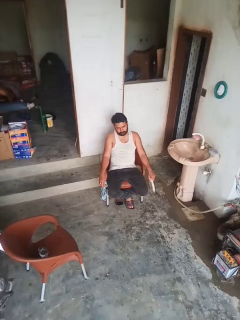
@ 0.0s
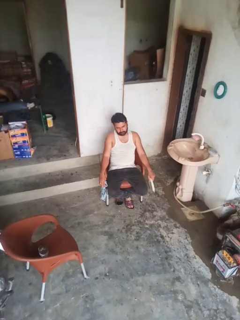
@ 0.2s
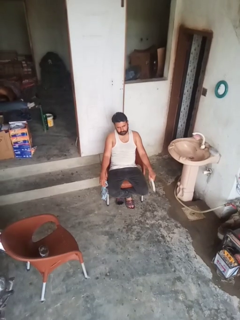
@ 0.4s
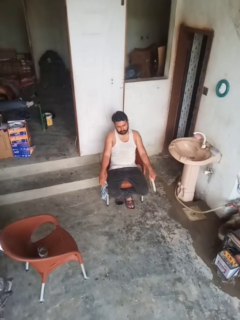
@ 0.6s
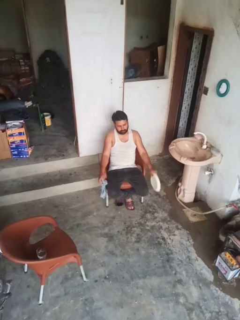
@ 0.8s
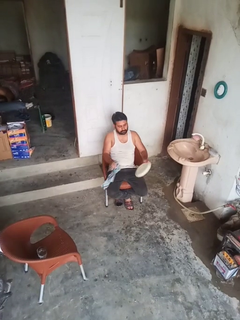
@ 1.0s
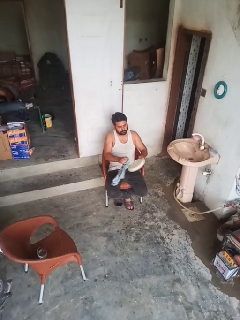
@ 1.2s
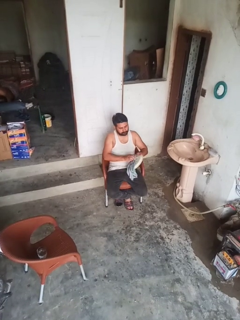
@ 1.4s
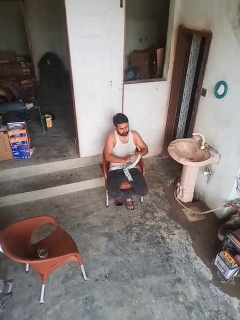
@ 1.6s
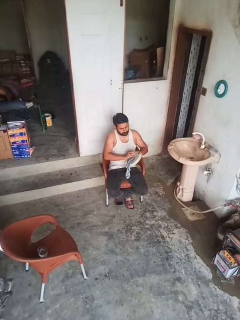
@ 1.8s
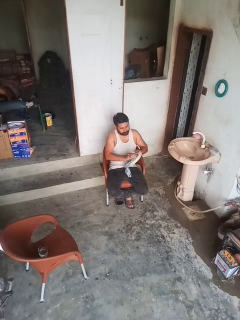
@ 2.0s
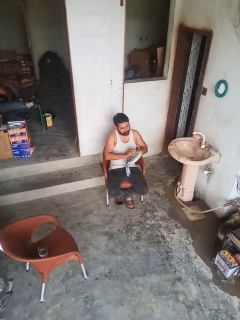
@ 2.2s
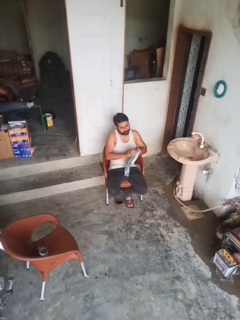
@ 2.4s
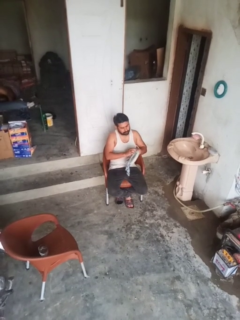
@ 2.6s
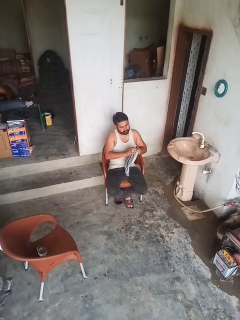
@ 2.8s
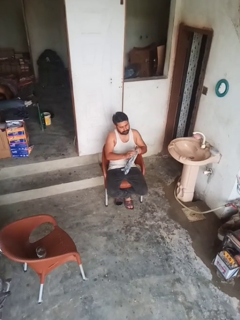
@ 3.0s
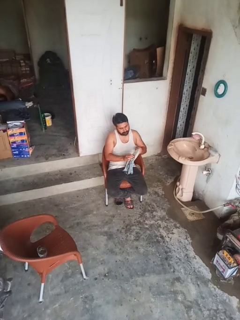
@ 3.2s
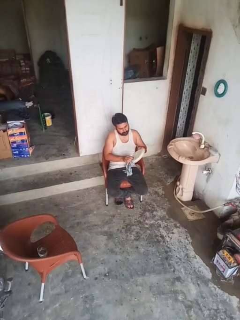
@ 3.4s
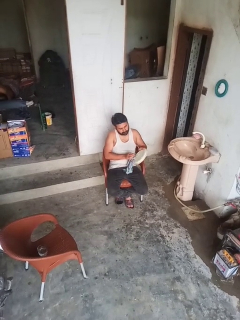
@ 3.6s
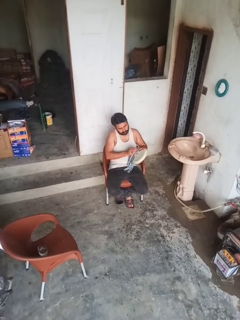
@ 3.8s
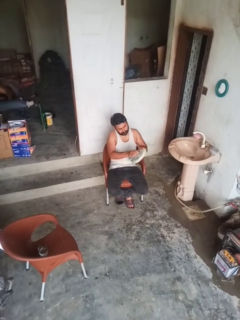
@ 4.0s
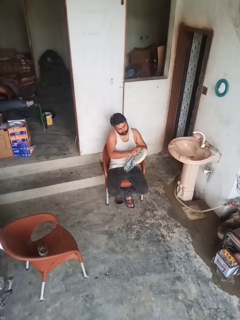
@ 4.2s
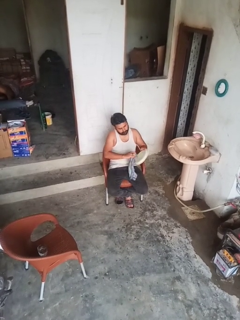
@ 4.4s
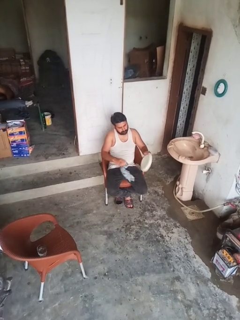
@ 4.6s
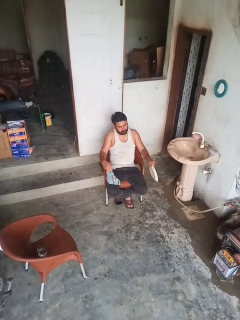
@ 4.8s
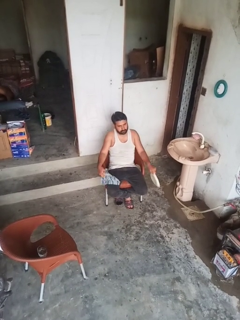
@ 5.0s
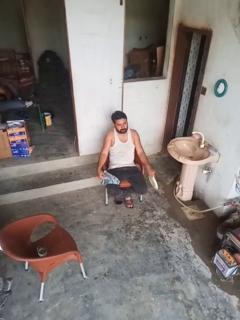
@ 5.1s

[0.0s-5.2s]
person dries dish

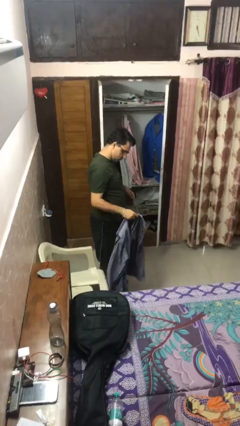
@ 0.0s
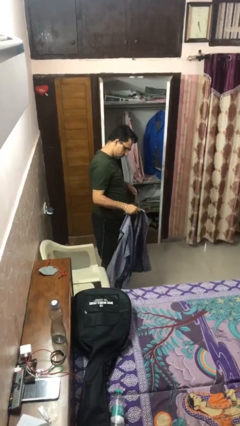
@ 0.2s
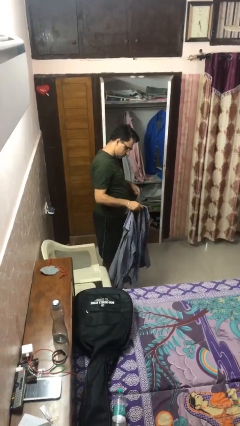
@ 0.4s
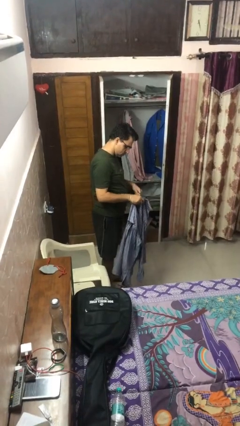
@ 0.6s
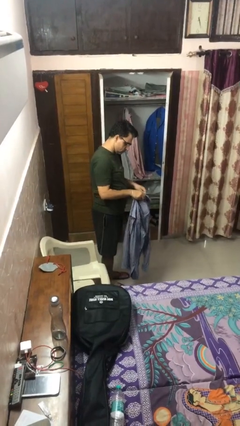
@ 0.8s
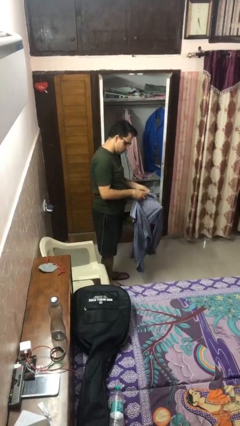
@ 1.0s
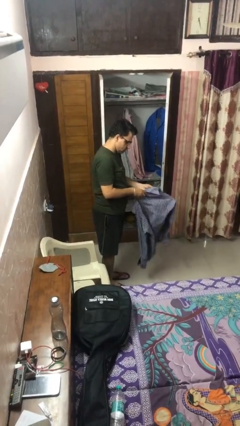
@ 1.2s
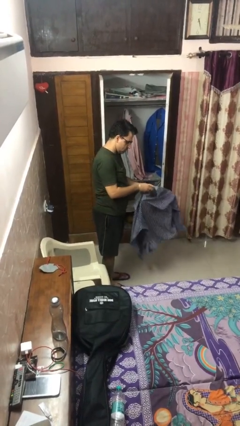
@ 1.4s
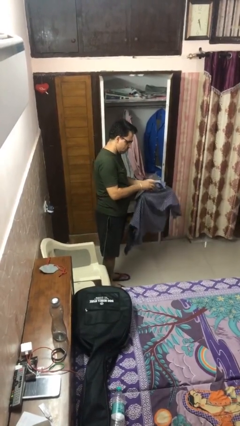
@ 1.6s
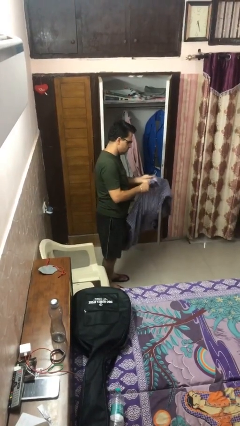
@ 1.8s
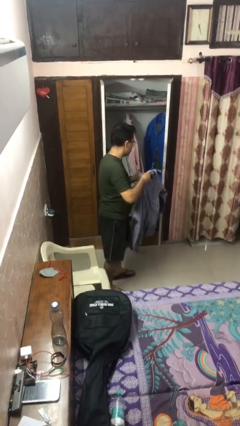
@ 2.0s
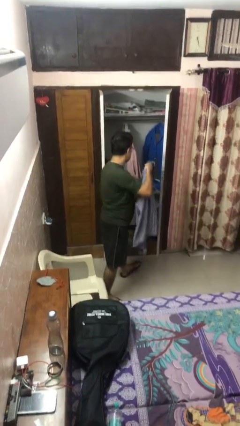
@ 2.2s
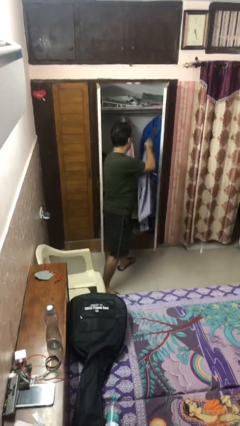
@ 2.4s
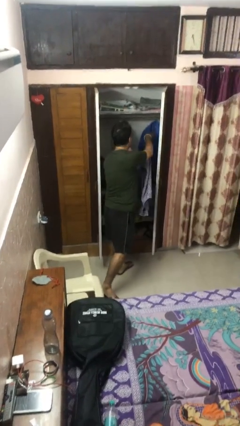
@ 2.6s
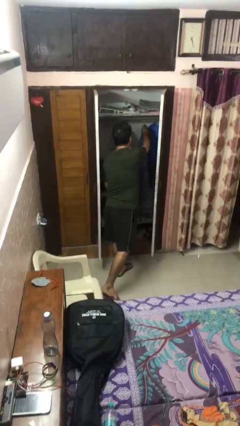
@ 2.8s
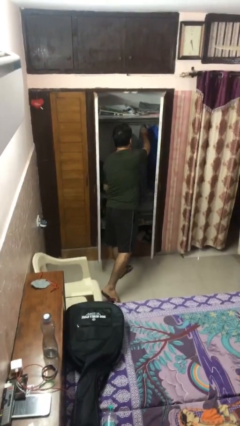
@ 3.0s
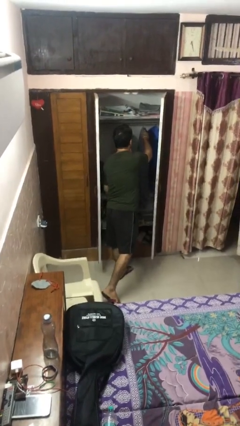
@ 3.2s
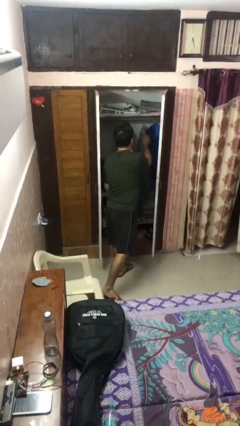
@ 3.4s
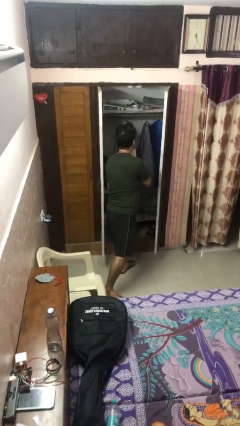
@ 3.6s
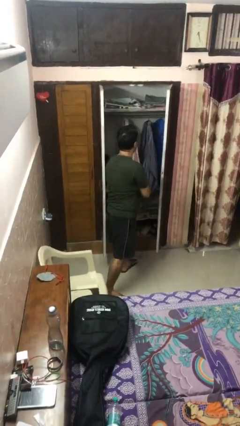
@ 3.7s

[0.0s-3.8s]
person puts clothes into closet

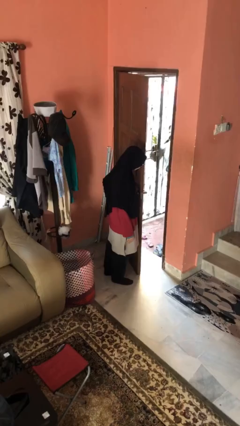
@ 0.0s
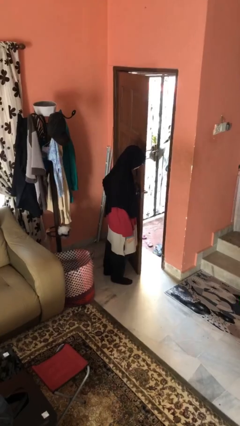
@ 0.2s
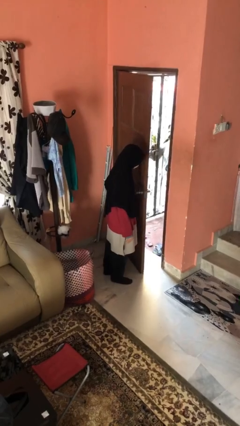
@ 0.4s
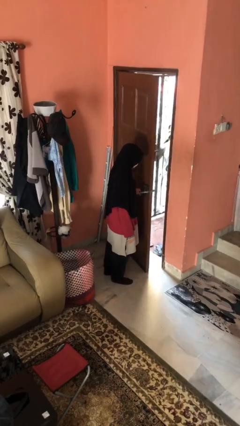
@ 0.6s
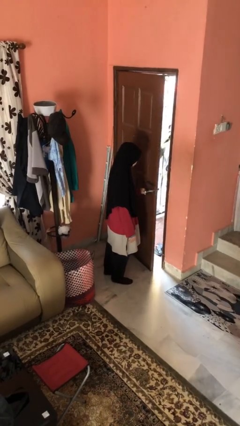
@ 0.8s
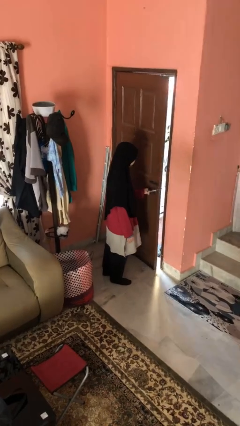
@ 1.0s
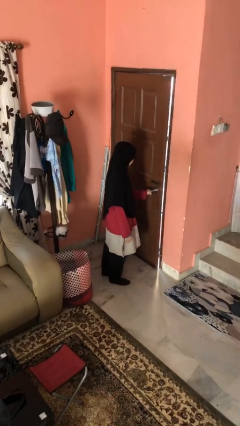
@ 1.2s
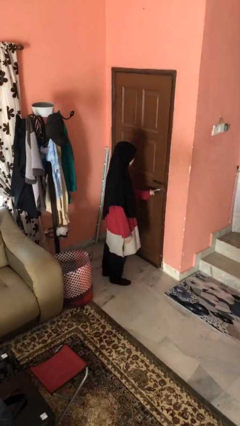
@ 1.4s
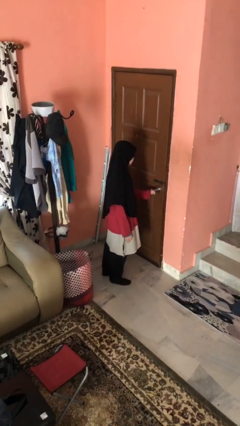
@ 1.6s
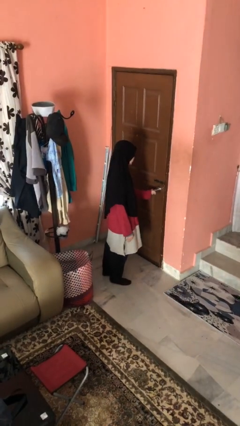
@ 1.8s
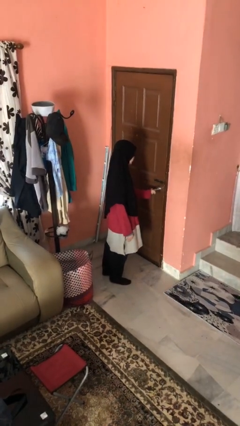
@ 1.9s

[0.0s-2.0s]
person closes facility door

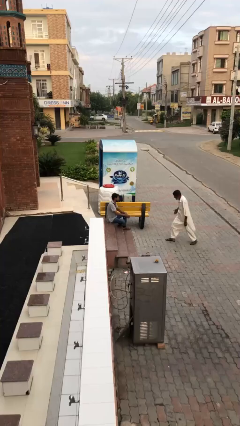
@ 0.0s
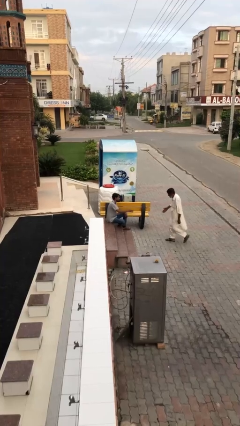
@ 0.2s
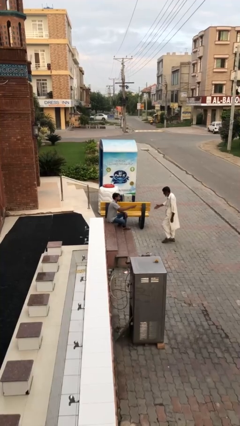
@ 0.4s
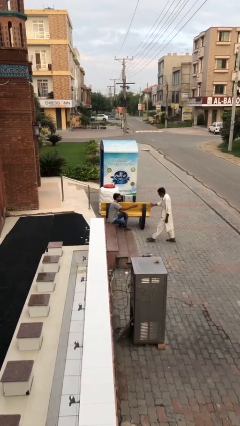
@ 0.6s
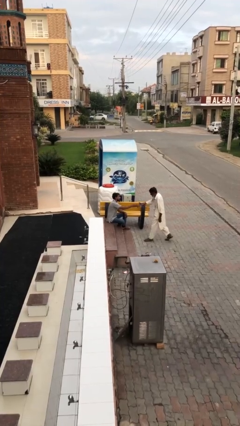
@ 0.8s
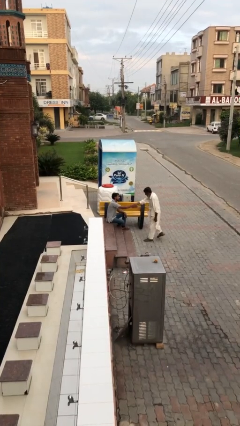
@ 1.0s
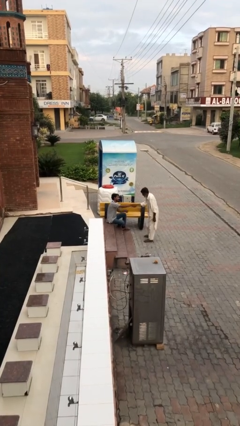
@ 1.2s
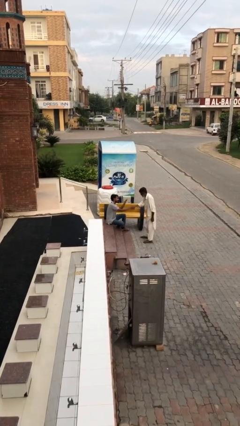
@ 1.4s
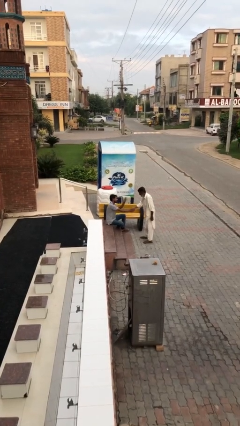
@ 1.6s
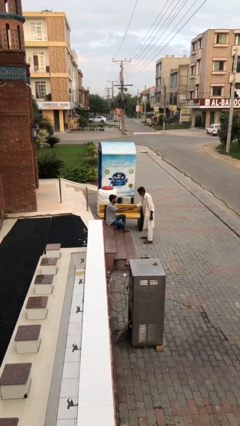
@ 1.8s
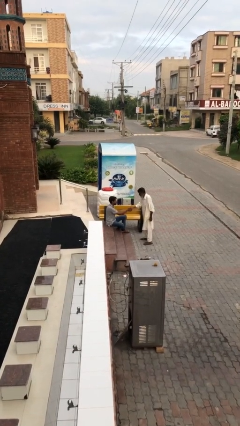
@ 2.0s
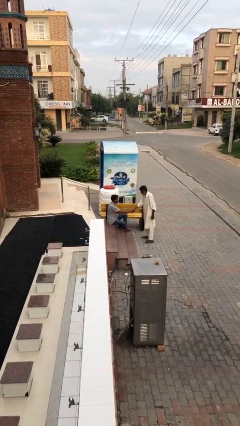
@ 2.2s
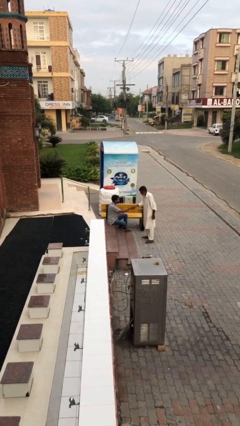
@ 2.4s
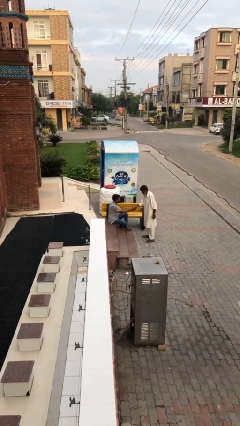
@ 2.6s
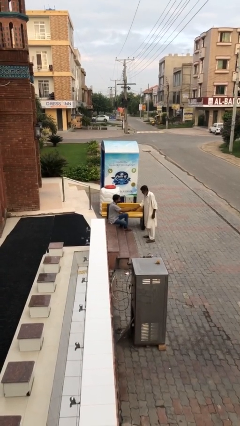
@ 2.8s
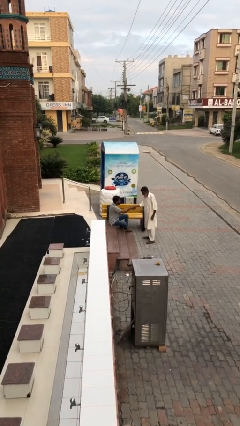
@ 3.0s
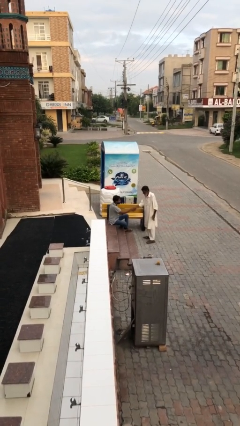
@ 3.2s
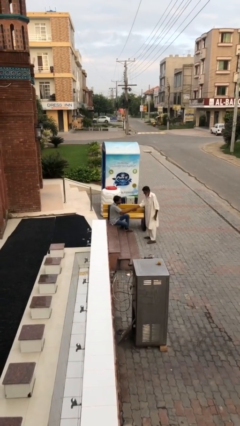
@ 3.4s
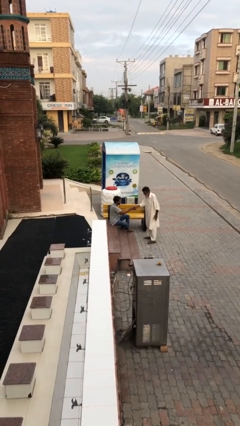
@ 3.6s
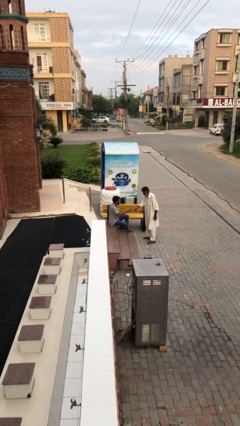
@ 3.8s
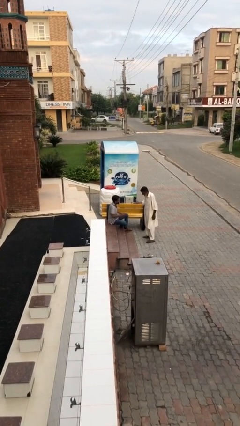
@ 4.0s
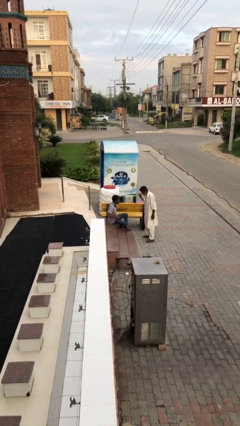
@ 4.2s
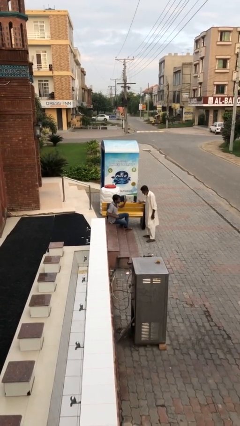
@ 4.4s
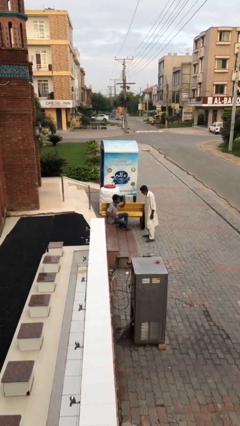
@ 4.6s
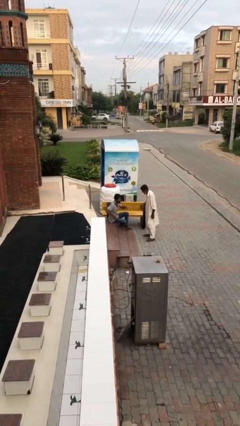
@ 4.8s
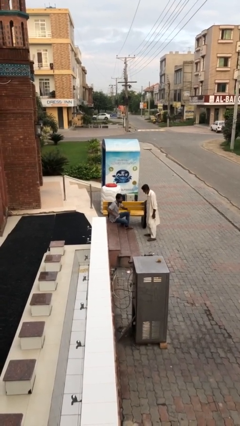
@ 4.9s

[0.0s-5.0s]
person shakes hand

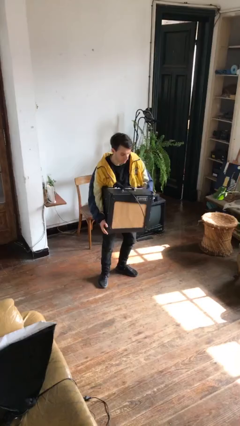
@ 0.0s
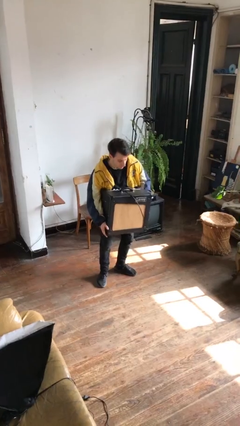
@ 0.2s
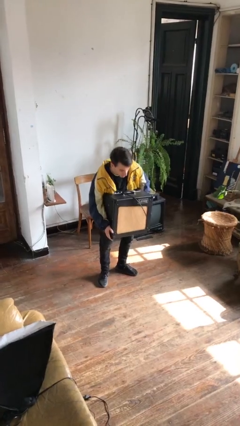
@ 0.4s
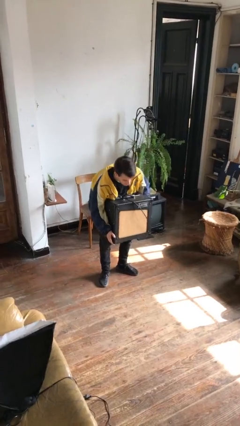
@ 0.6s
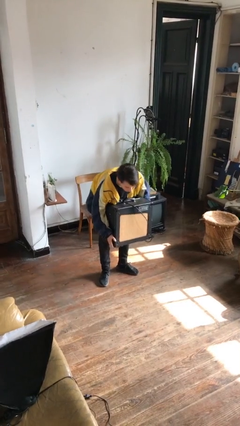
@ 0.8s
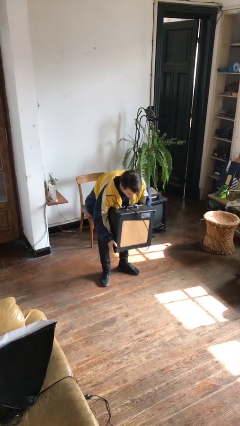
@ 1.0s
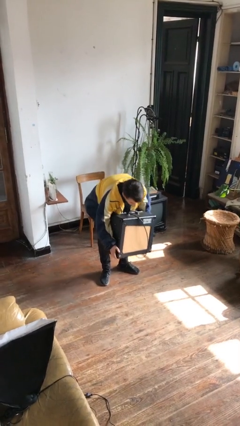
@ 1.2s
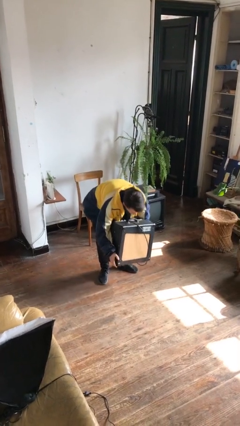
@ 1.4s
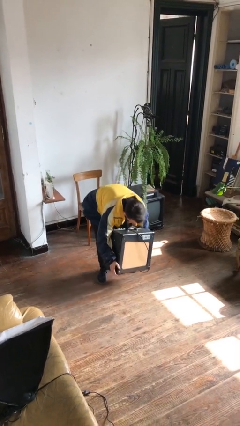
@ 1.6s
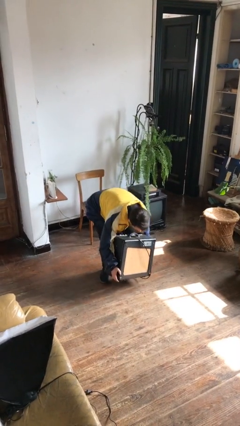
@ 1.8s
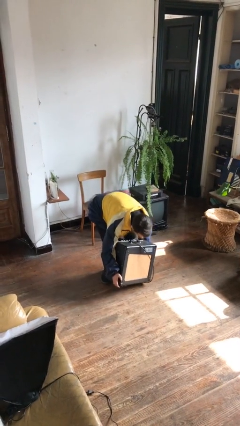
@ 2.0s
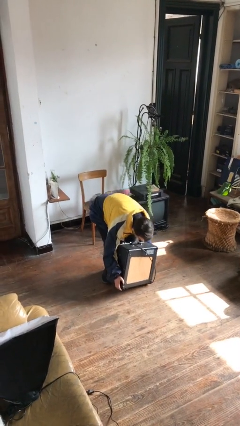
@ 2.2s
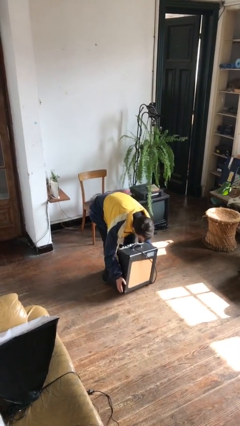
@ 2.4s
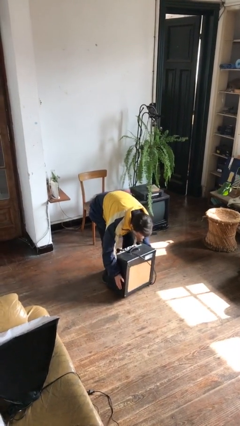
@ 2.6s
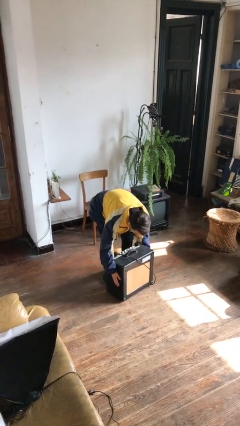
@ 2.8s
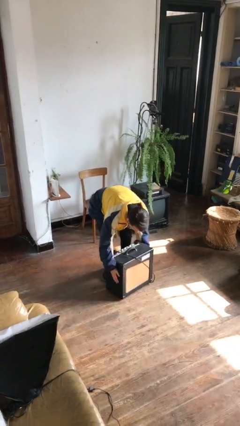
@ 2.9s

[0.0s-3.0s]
person puts down object on floor
